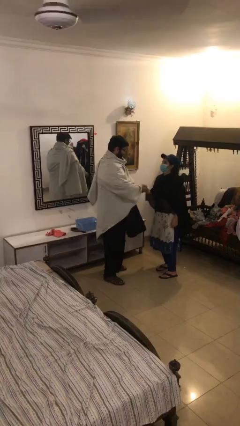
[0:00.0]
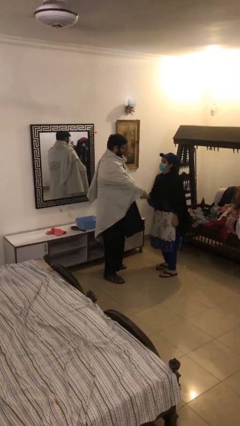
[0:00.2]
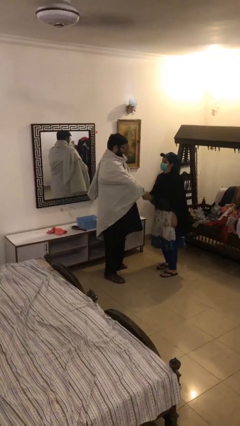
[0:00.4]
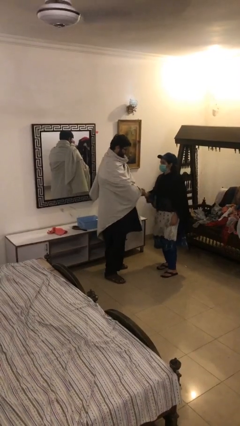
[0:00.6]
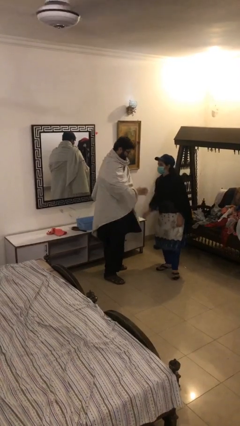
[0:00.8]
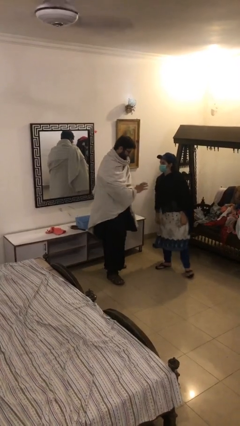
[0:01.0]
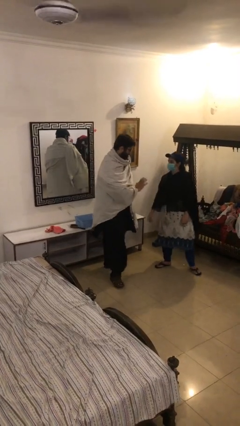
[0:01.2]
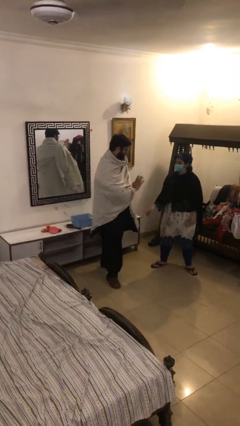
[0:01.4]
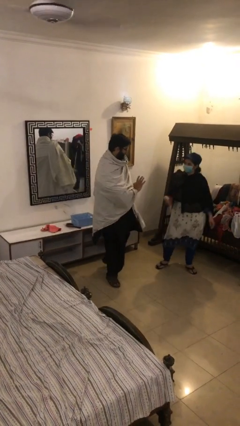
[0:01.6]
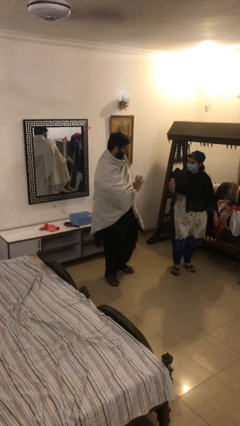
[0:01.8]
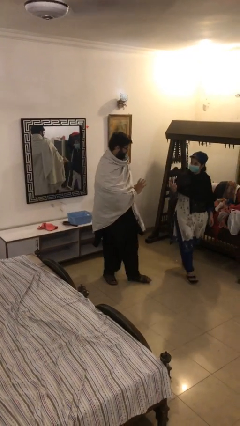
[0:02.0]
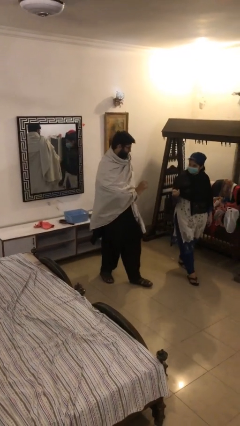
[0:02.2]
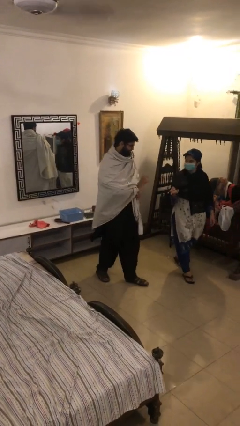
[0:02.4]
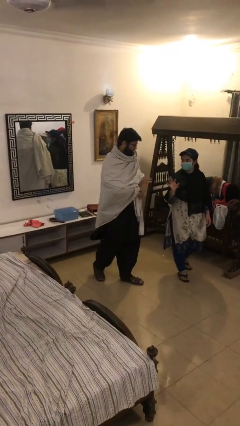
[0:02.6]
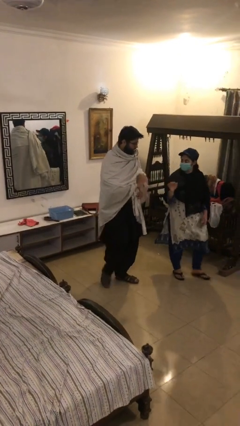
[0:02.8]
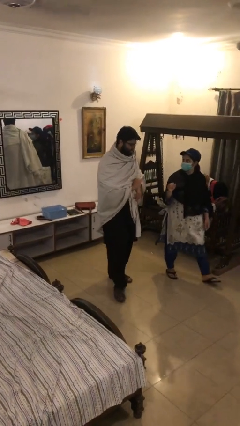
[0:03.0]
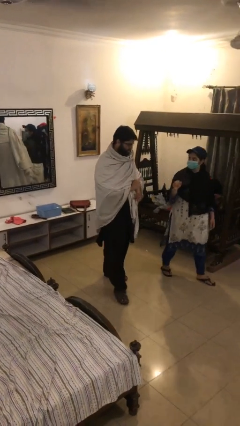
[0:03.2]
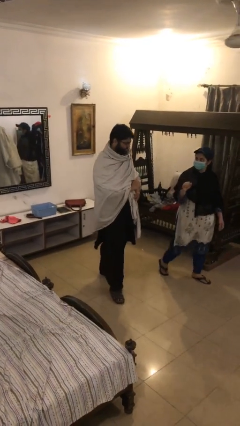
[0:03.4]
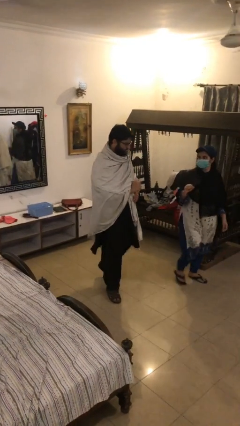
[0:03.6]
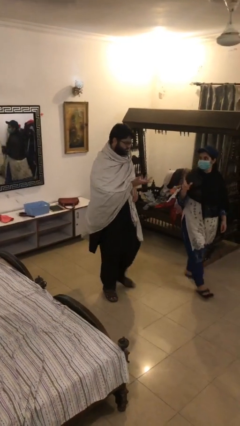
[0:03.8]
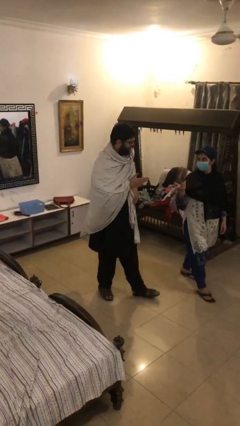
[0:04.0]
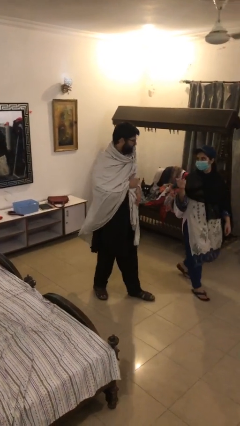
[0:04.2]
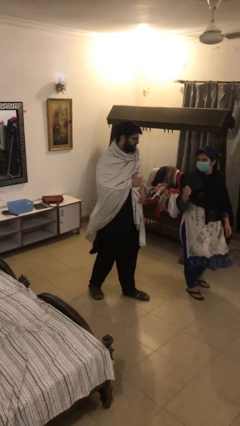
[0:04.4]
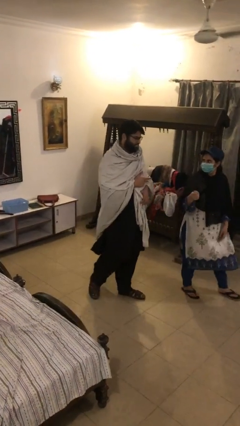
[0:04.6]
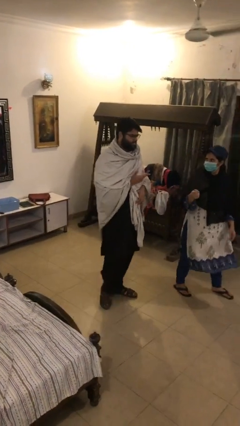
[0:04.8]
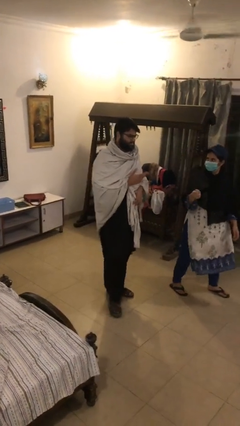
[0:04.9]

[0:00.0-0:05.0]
person talks to person

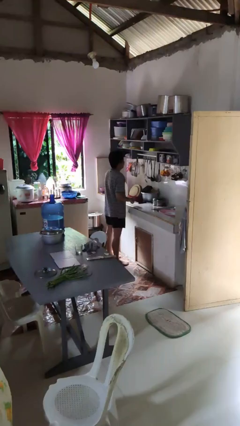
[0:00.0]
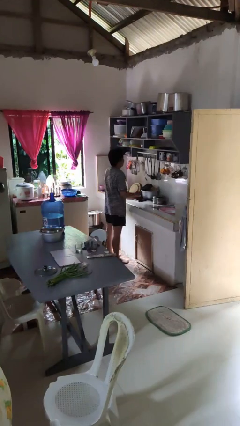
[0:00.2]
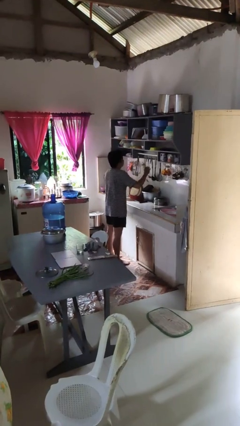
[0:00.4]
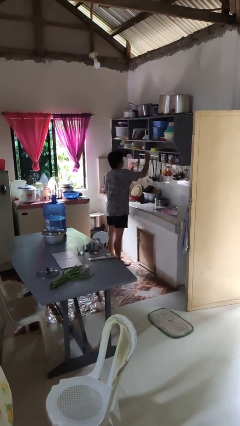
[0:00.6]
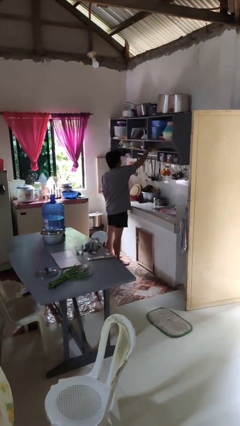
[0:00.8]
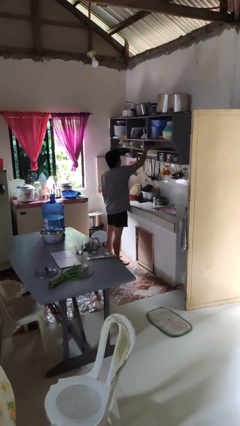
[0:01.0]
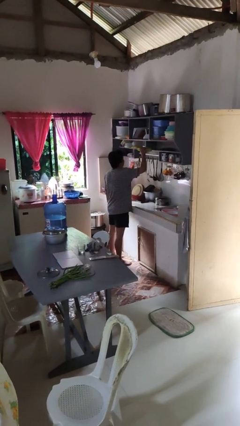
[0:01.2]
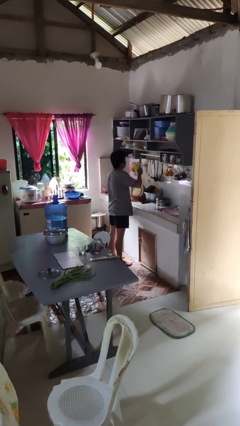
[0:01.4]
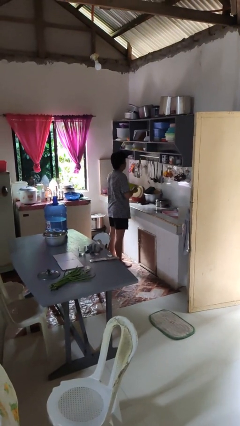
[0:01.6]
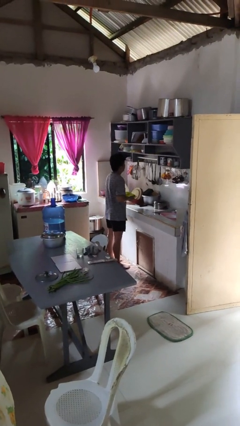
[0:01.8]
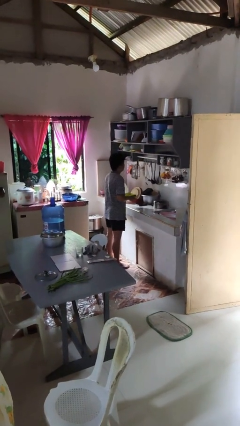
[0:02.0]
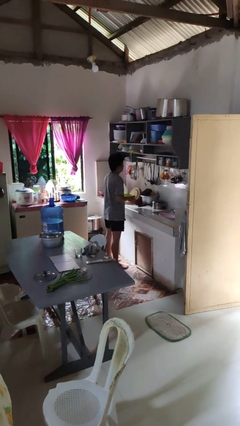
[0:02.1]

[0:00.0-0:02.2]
person takes object from cabinet

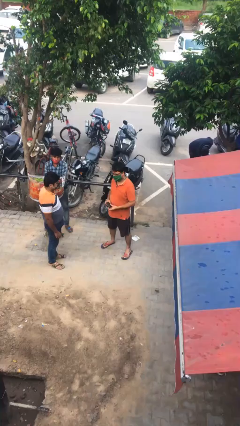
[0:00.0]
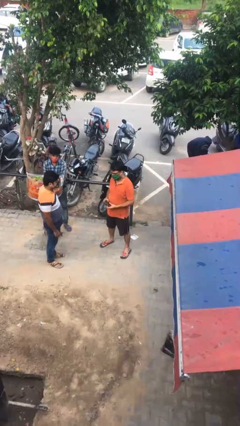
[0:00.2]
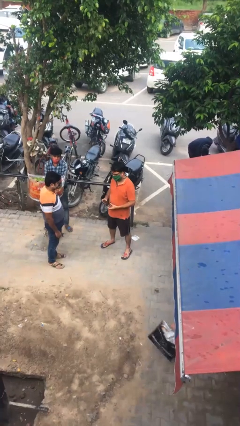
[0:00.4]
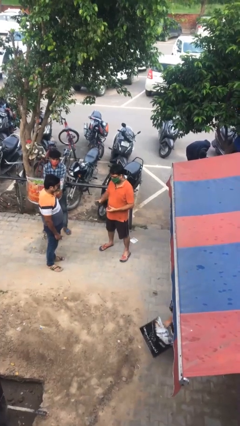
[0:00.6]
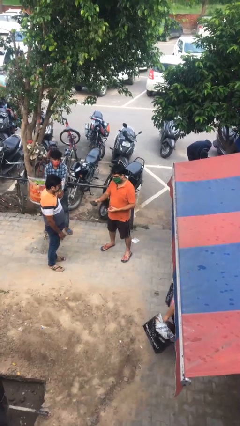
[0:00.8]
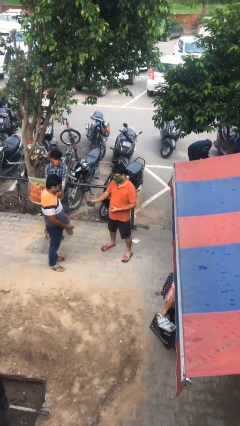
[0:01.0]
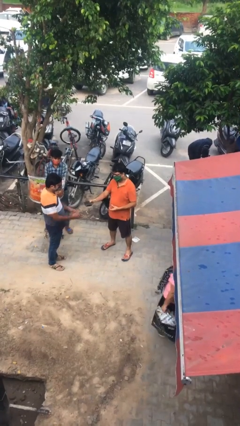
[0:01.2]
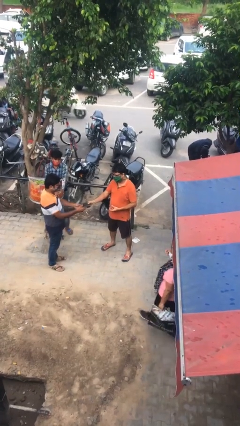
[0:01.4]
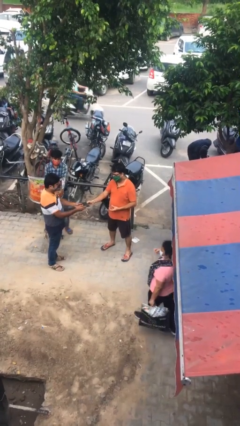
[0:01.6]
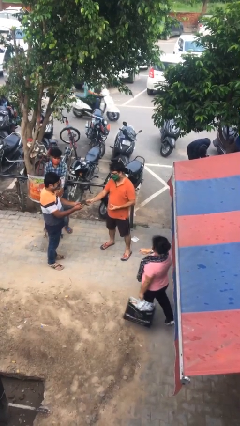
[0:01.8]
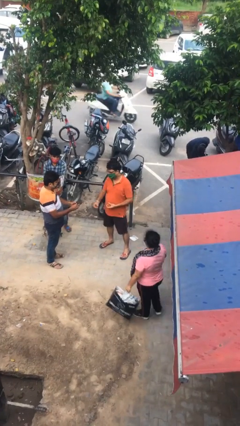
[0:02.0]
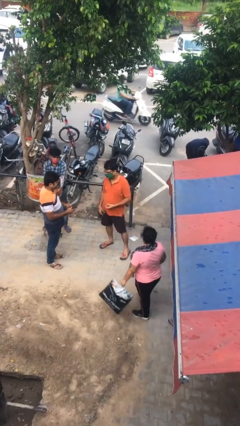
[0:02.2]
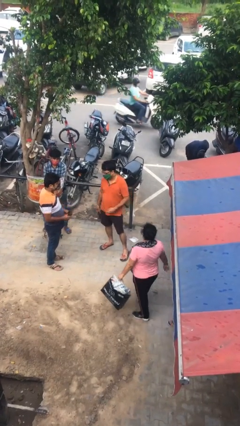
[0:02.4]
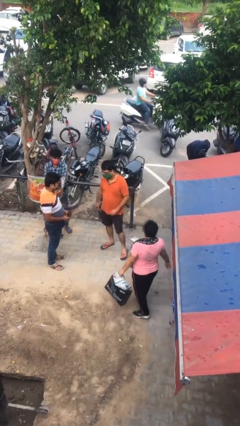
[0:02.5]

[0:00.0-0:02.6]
person transfers object to person

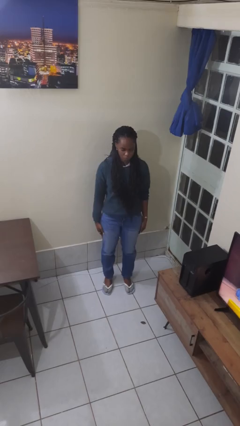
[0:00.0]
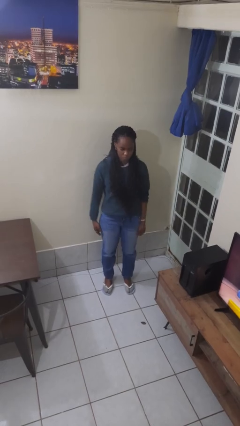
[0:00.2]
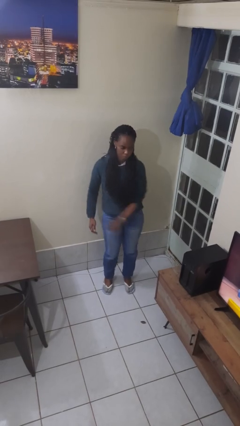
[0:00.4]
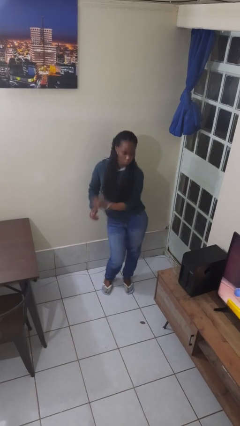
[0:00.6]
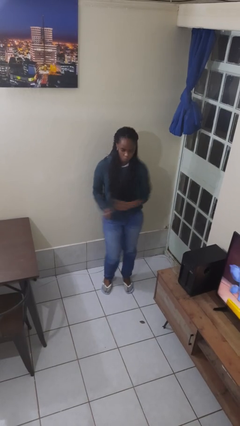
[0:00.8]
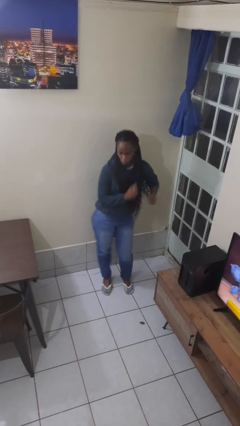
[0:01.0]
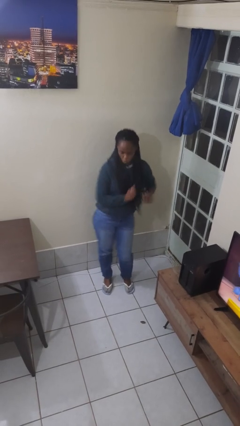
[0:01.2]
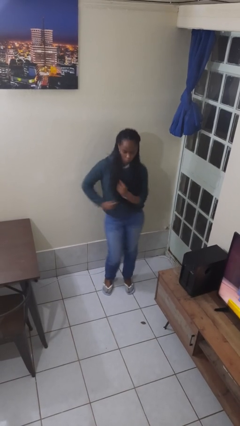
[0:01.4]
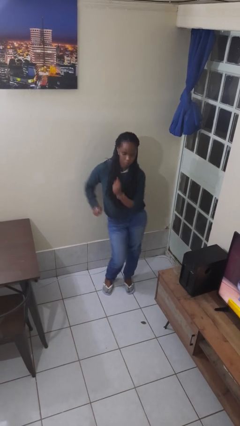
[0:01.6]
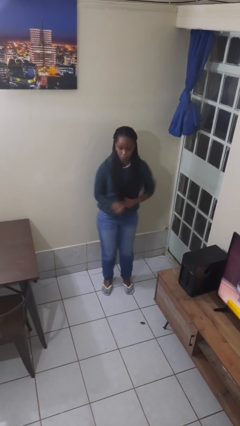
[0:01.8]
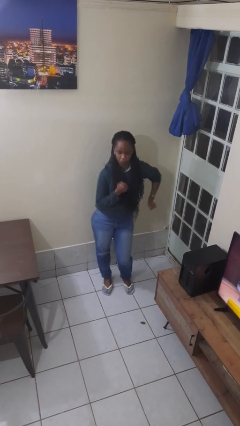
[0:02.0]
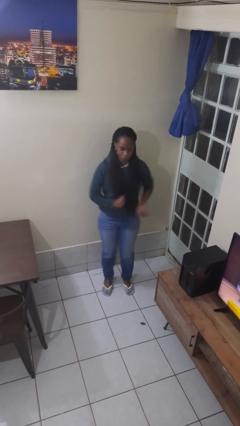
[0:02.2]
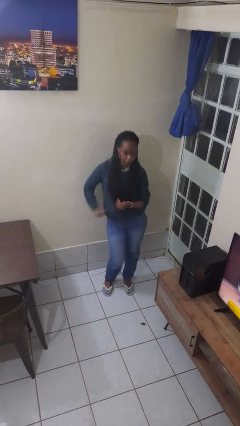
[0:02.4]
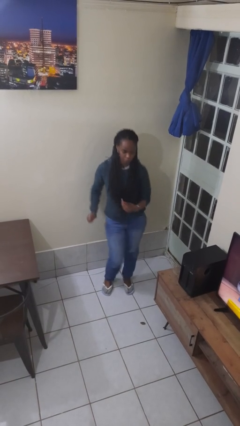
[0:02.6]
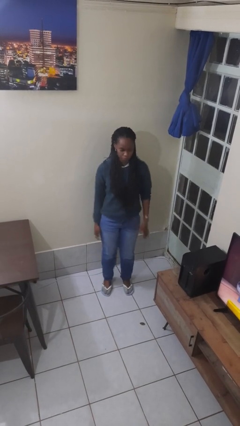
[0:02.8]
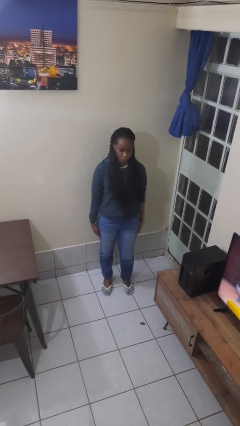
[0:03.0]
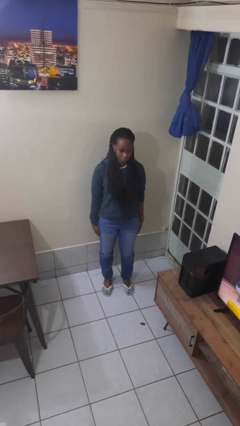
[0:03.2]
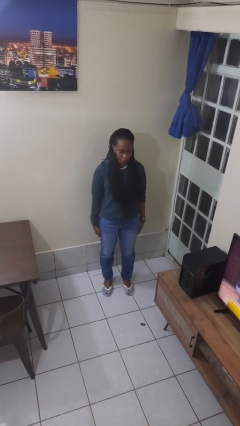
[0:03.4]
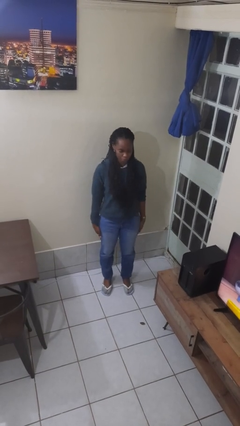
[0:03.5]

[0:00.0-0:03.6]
person wiggles hips

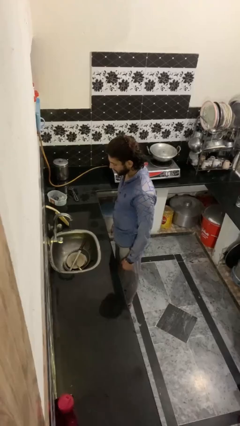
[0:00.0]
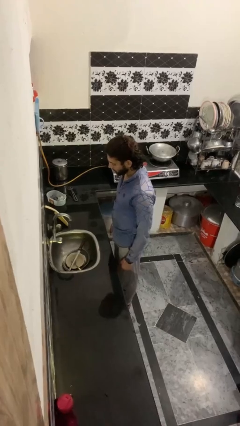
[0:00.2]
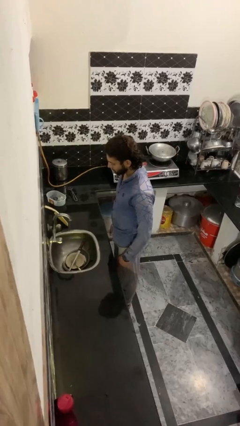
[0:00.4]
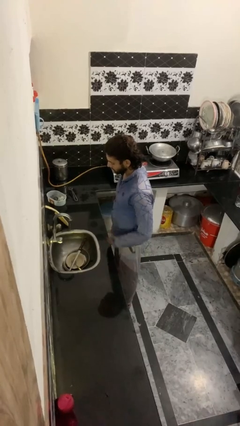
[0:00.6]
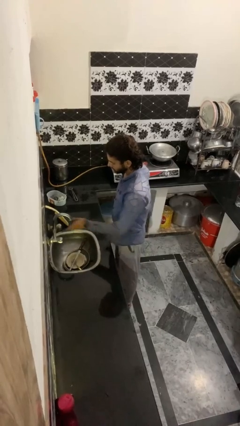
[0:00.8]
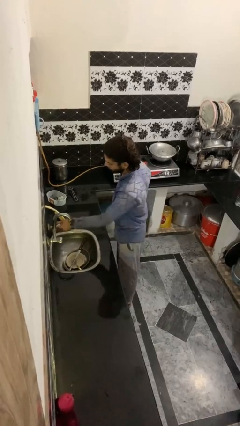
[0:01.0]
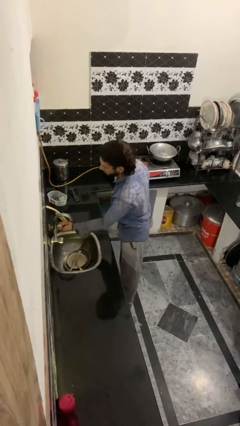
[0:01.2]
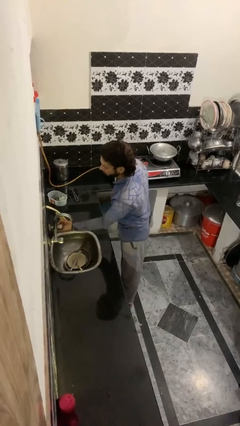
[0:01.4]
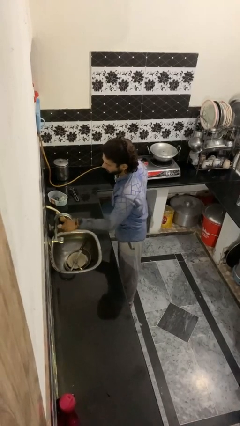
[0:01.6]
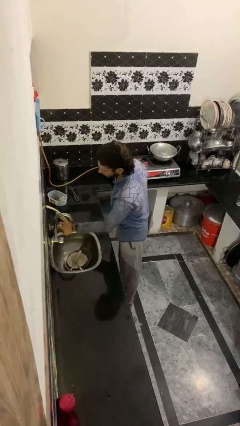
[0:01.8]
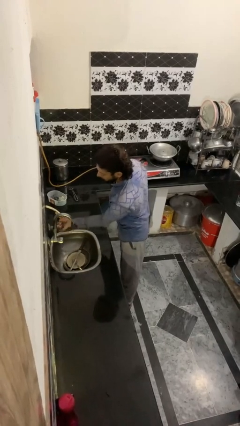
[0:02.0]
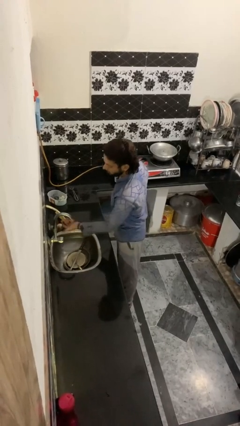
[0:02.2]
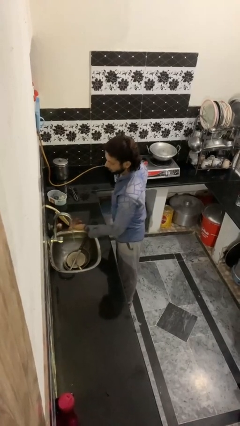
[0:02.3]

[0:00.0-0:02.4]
person turns on faucet

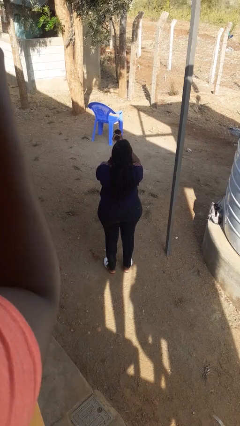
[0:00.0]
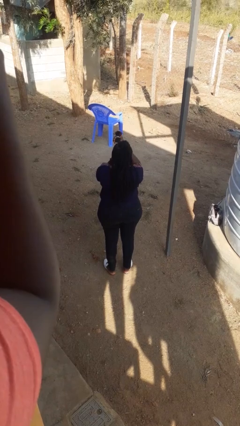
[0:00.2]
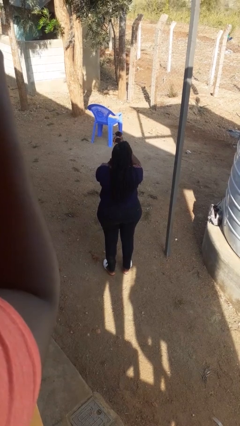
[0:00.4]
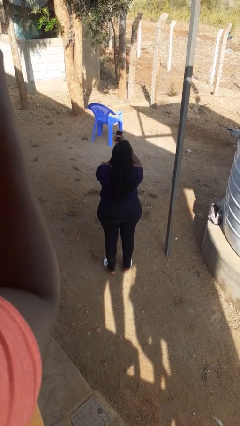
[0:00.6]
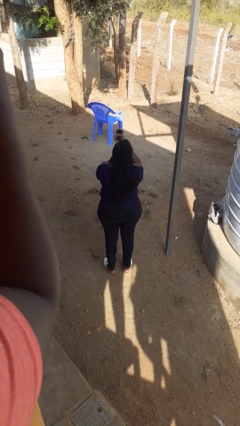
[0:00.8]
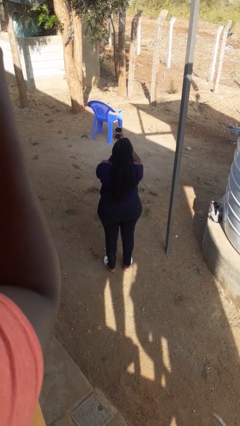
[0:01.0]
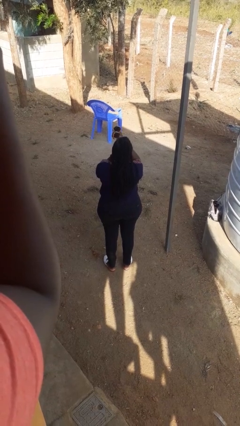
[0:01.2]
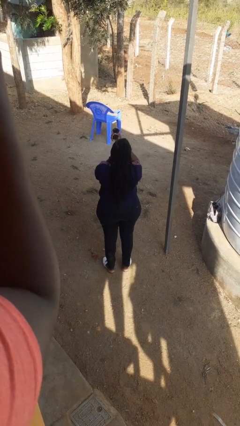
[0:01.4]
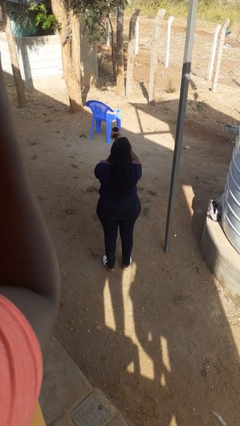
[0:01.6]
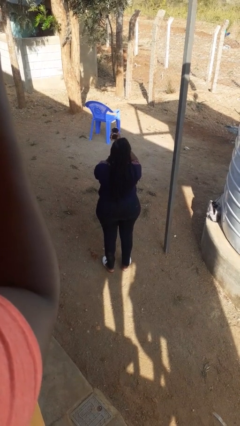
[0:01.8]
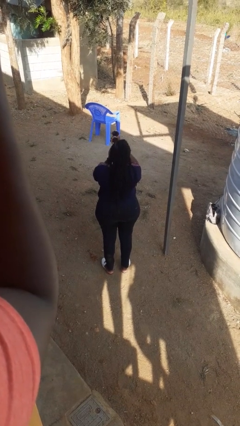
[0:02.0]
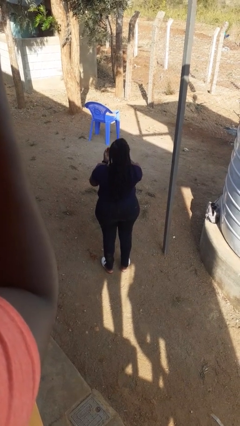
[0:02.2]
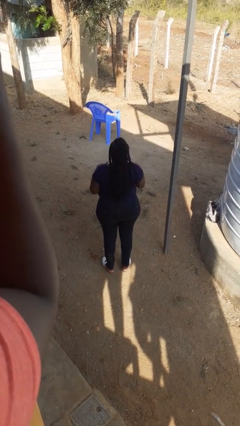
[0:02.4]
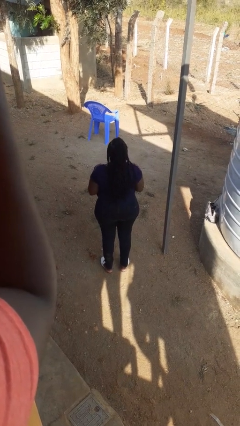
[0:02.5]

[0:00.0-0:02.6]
person applies eye makeup
